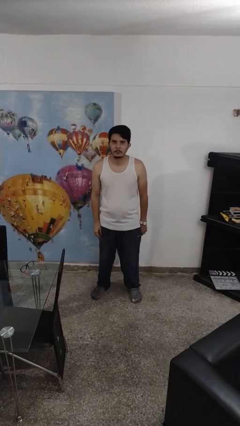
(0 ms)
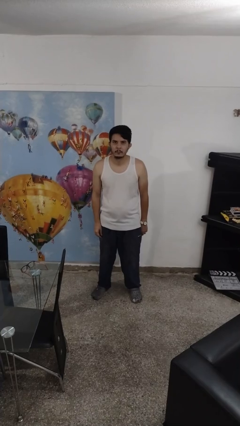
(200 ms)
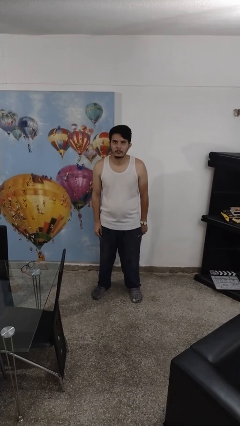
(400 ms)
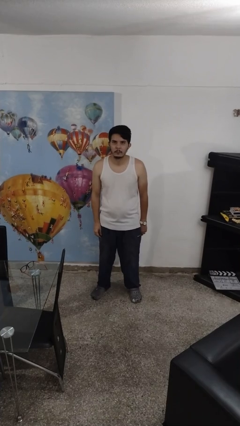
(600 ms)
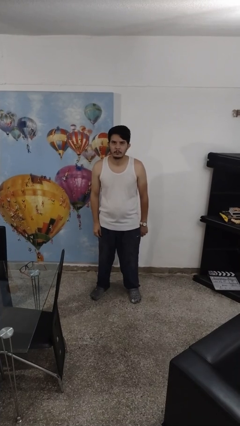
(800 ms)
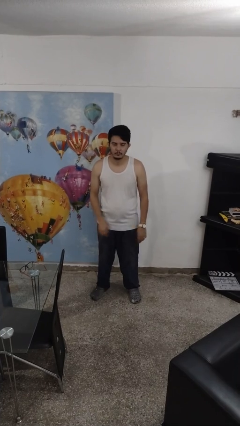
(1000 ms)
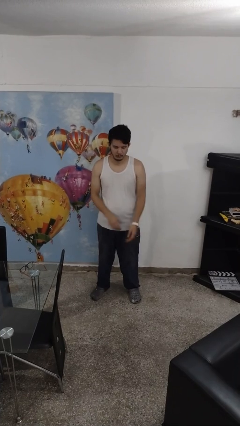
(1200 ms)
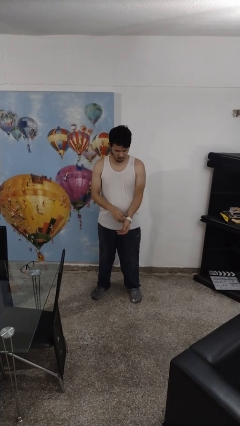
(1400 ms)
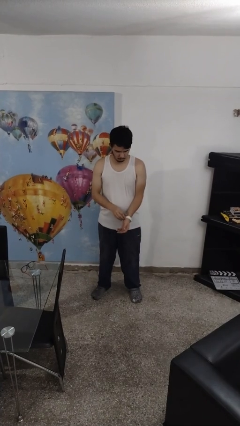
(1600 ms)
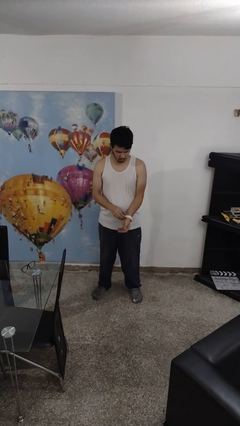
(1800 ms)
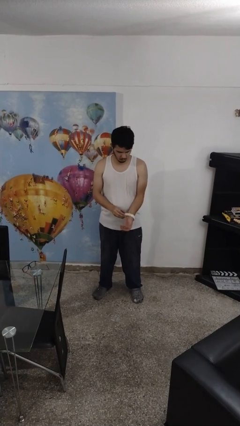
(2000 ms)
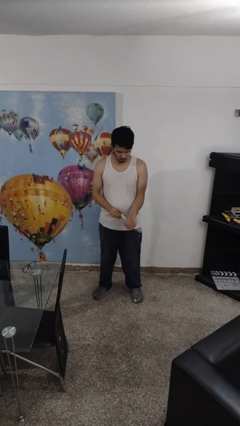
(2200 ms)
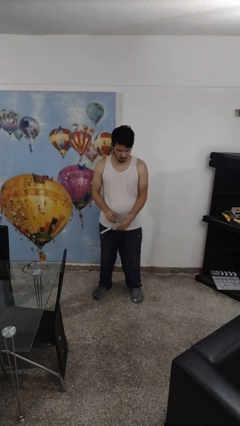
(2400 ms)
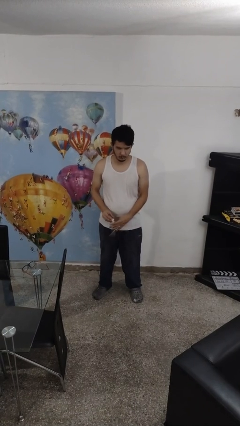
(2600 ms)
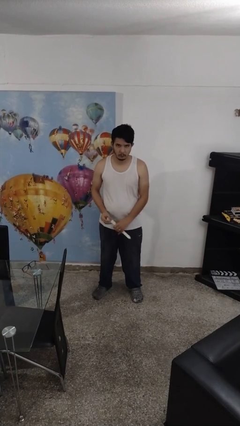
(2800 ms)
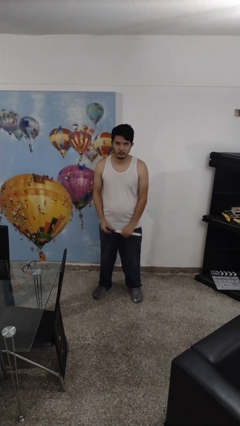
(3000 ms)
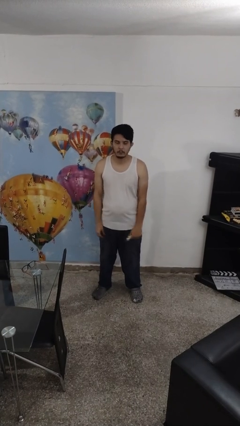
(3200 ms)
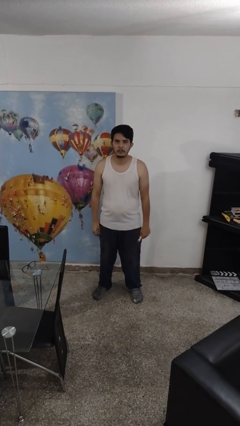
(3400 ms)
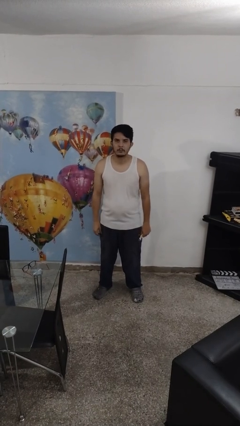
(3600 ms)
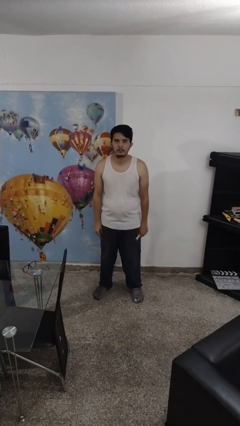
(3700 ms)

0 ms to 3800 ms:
person takes off wristwatch

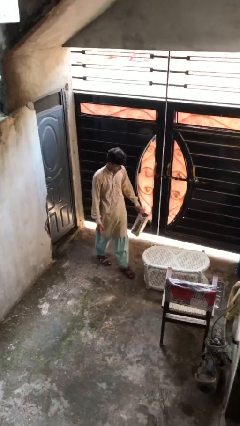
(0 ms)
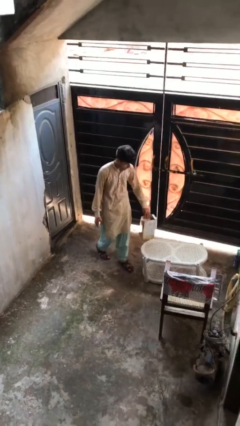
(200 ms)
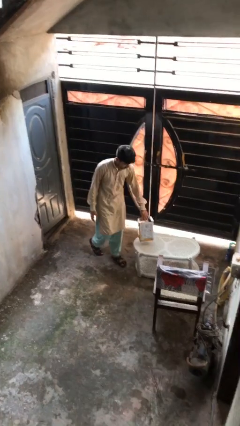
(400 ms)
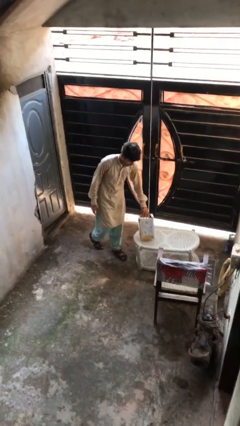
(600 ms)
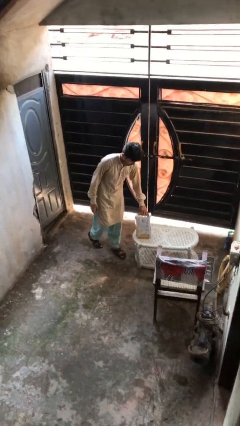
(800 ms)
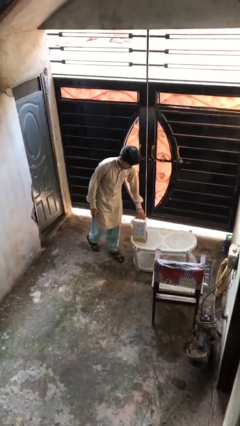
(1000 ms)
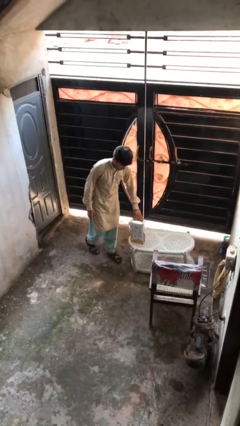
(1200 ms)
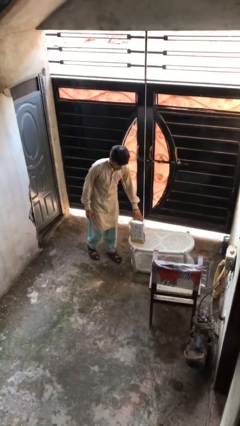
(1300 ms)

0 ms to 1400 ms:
person puts down object on table

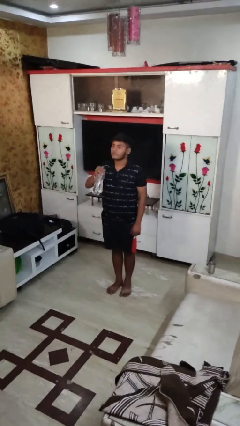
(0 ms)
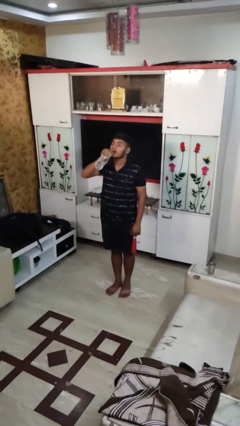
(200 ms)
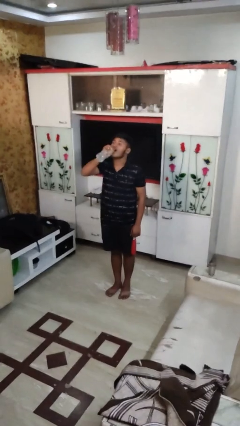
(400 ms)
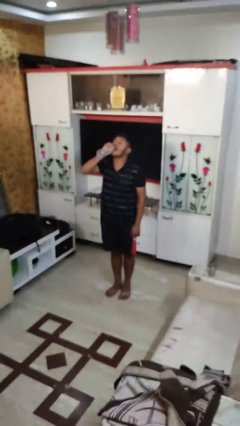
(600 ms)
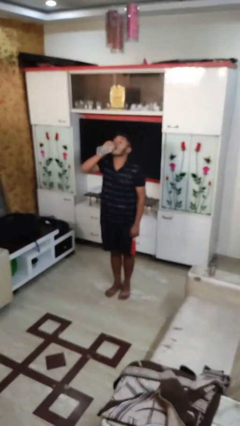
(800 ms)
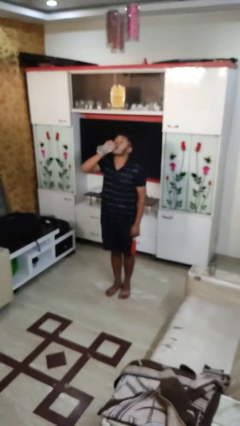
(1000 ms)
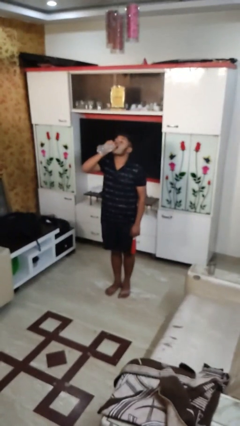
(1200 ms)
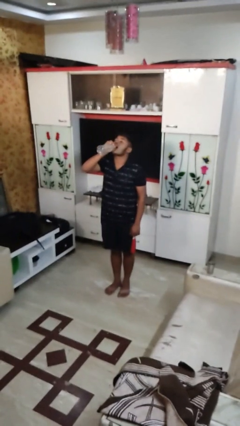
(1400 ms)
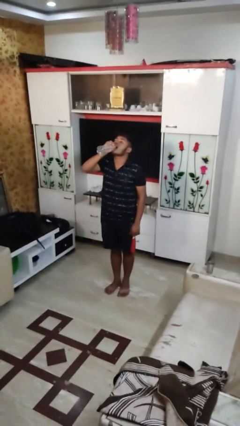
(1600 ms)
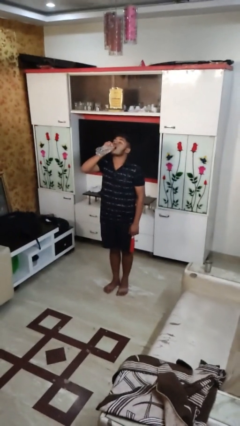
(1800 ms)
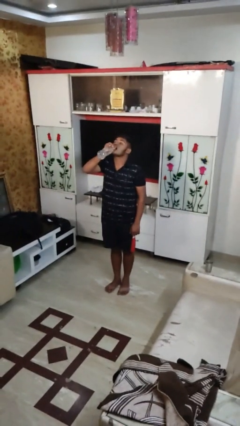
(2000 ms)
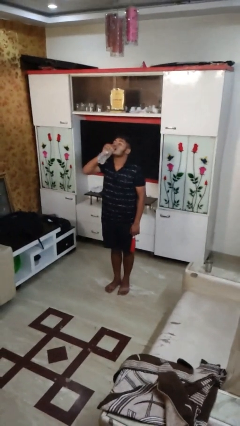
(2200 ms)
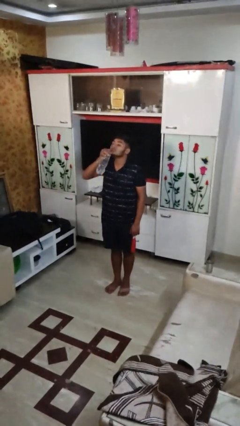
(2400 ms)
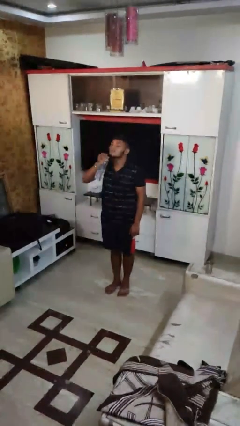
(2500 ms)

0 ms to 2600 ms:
person drinks from bottle

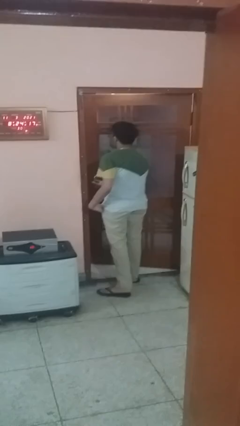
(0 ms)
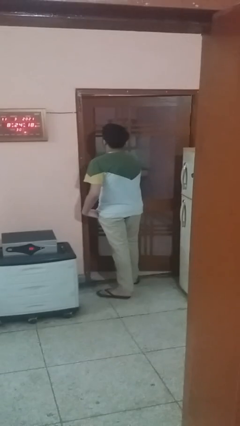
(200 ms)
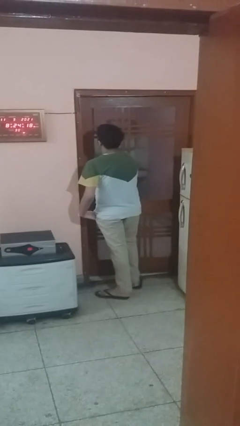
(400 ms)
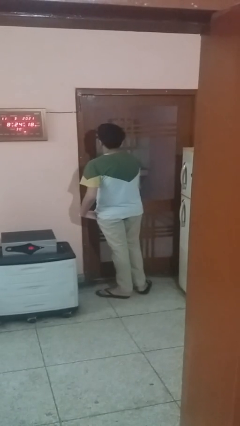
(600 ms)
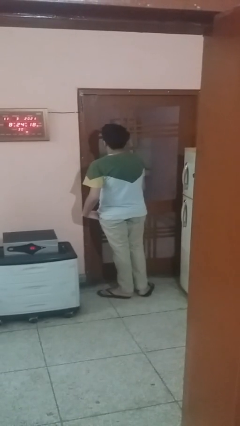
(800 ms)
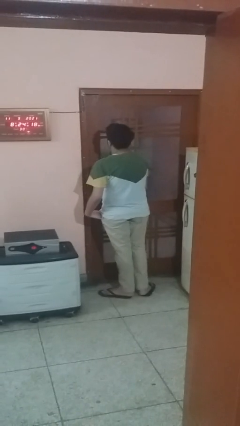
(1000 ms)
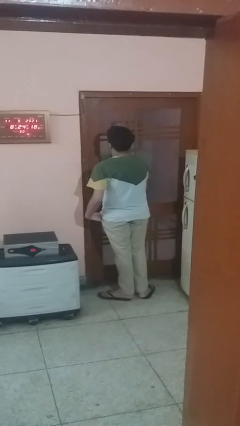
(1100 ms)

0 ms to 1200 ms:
person closes facility door

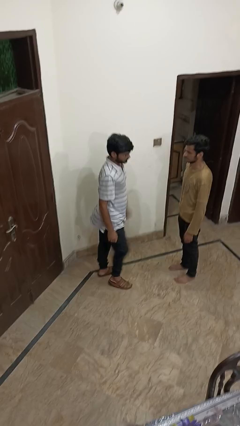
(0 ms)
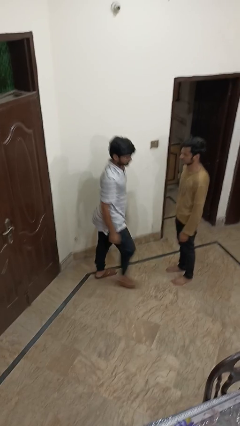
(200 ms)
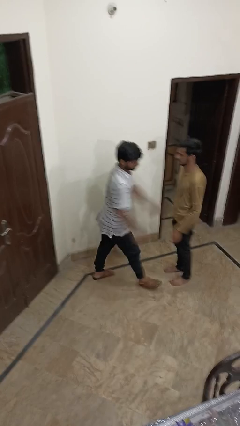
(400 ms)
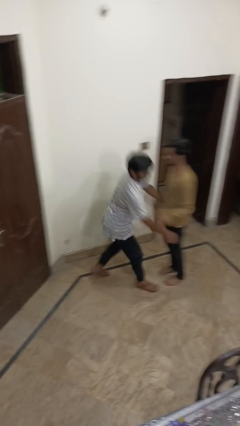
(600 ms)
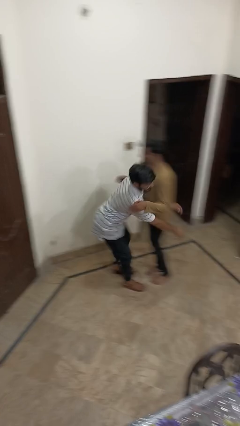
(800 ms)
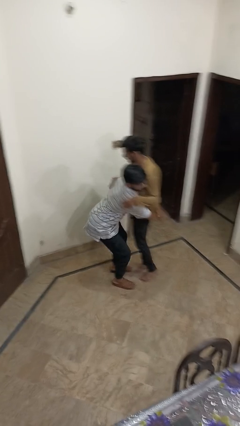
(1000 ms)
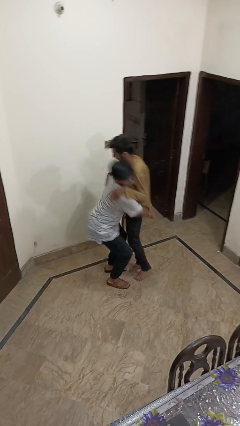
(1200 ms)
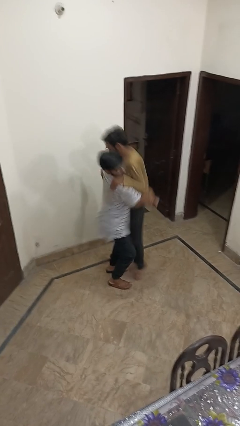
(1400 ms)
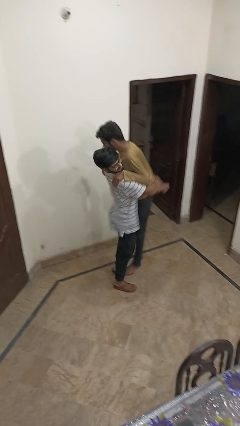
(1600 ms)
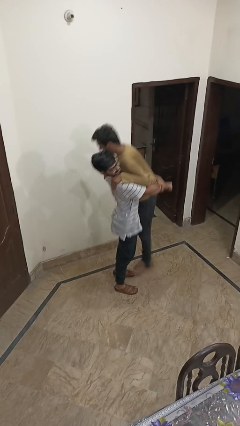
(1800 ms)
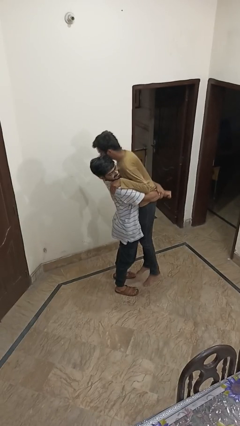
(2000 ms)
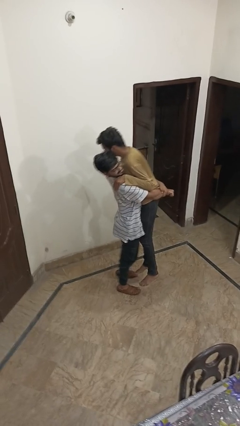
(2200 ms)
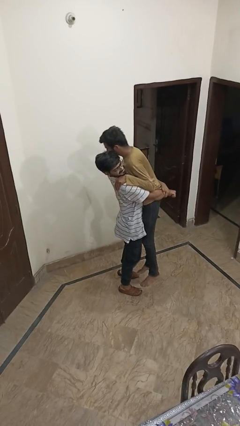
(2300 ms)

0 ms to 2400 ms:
person picks up person

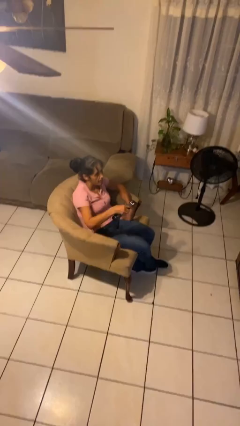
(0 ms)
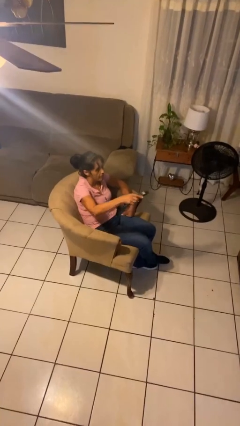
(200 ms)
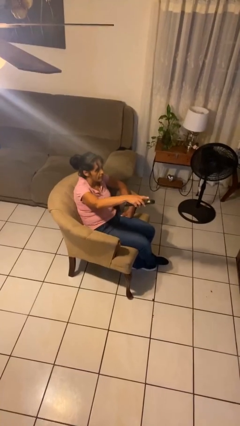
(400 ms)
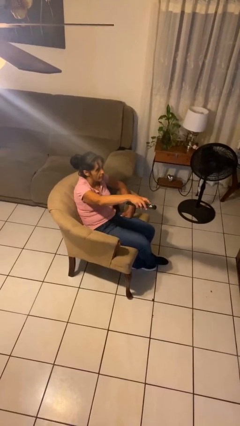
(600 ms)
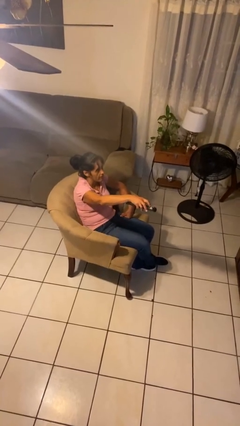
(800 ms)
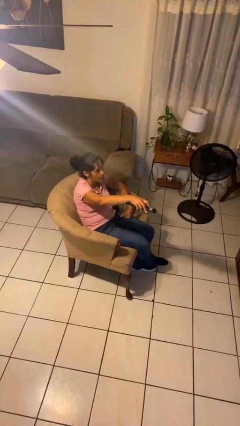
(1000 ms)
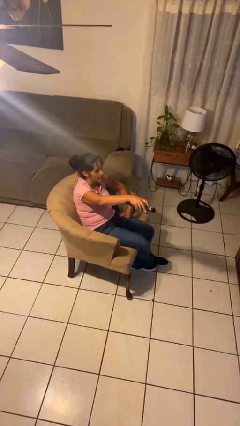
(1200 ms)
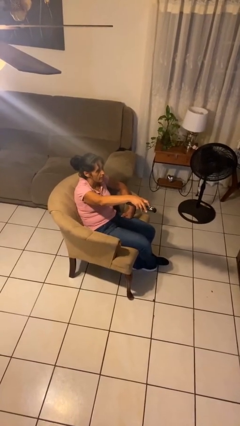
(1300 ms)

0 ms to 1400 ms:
person uses television remote

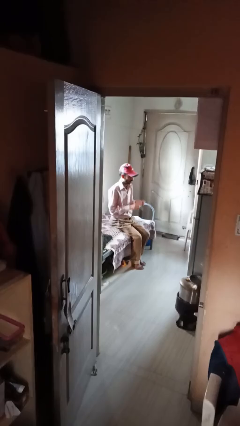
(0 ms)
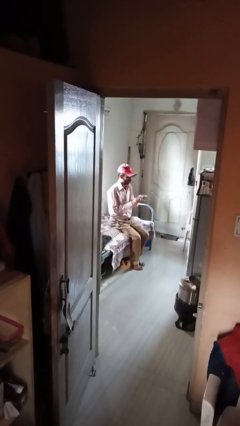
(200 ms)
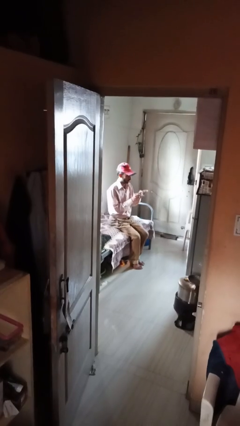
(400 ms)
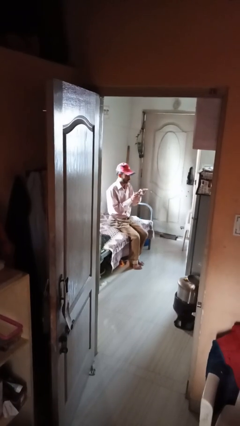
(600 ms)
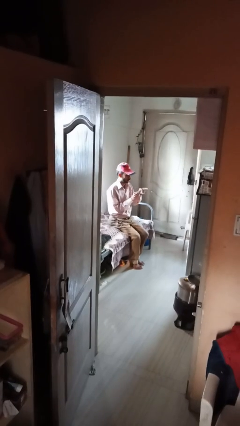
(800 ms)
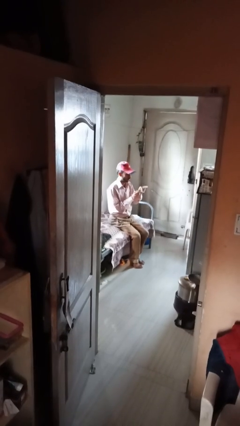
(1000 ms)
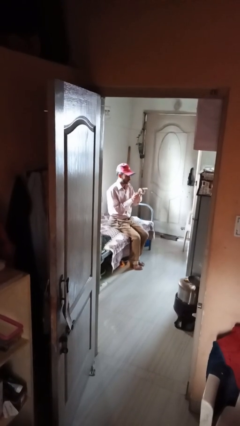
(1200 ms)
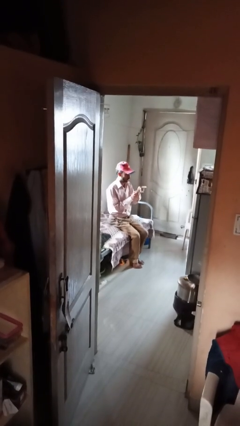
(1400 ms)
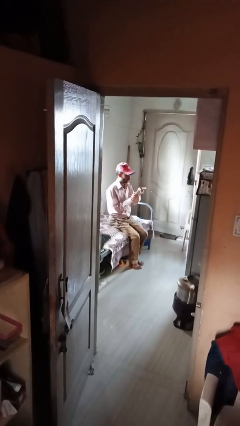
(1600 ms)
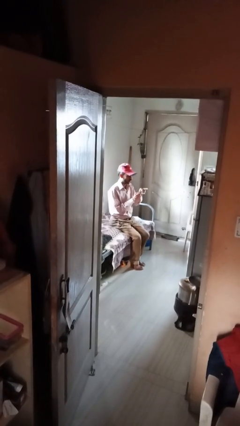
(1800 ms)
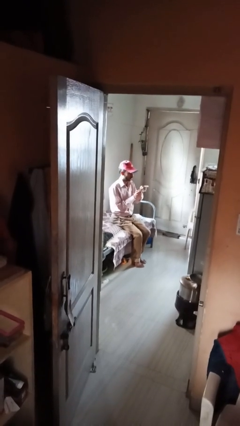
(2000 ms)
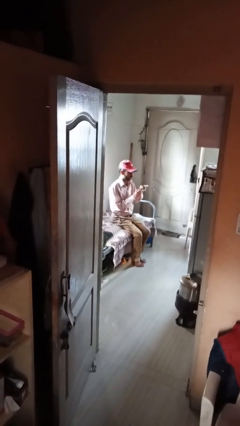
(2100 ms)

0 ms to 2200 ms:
person files fingernails

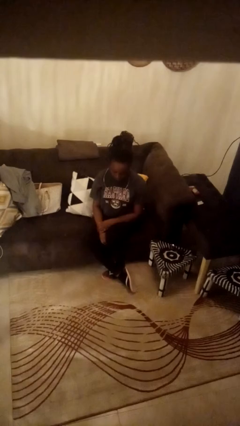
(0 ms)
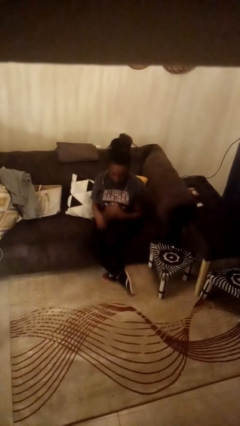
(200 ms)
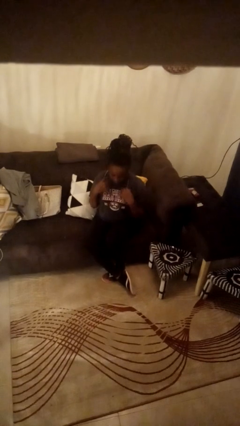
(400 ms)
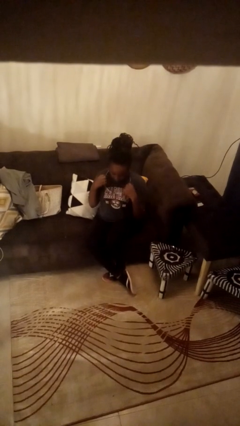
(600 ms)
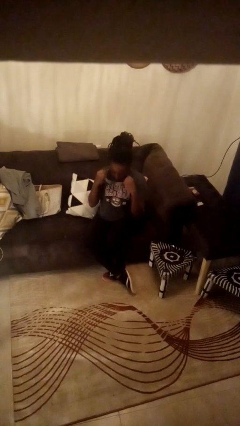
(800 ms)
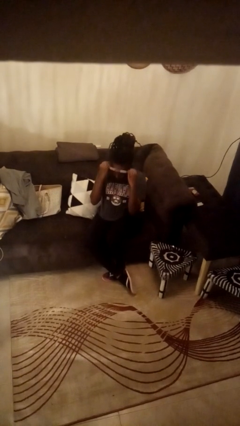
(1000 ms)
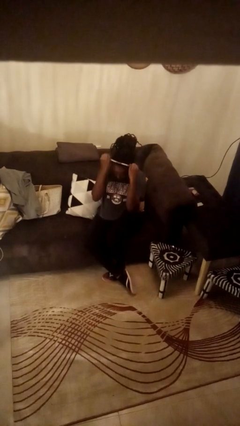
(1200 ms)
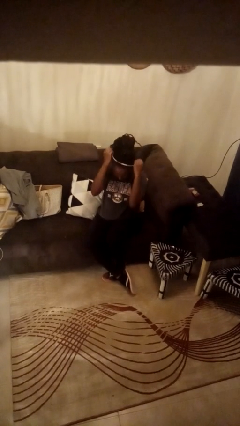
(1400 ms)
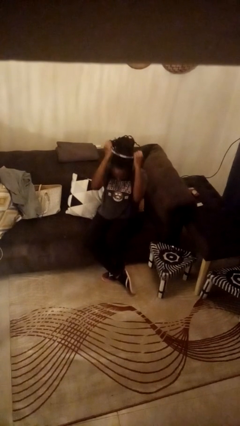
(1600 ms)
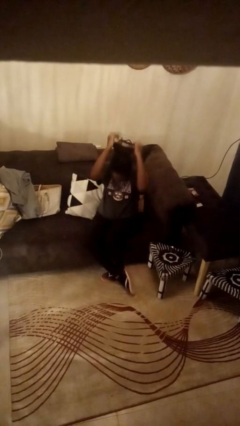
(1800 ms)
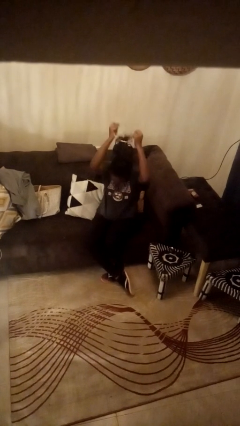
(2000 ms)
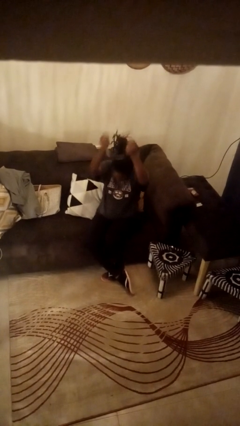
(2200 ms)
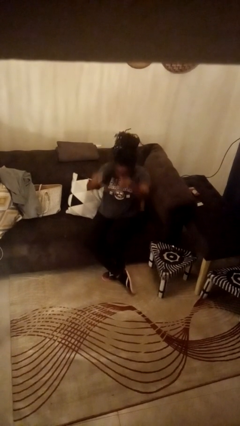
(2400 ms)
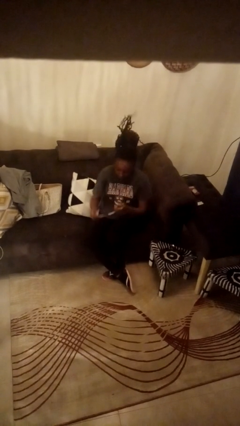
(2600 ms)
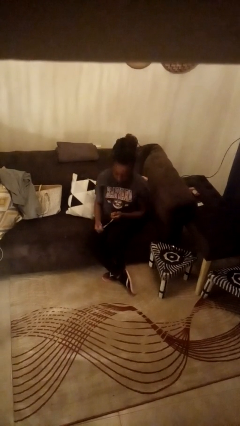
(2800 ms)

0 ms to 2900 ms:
person takes off necklace
